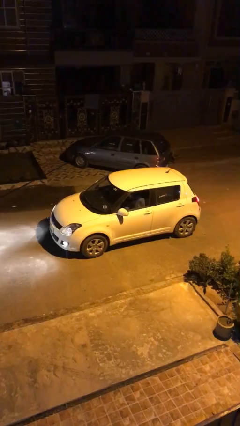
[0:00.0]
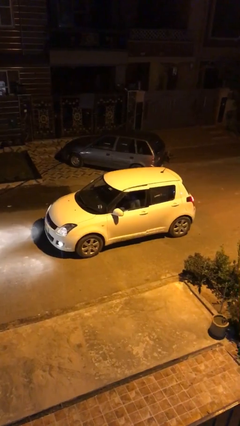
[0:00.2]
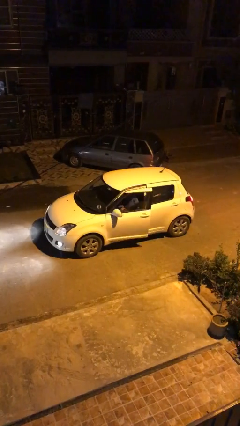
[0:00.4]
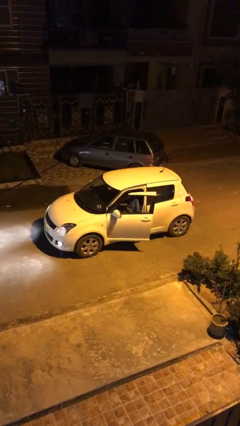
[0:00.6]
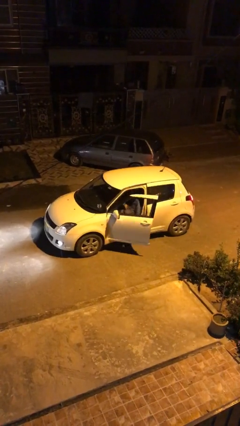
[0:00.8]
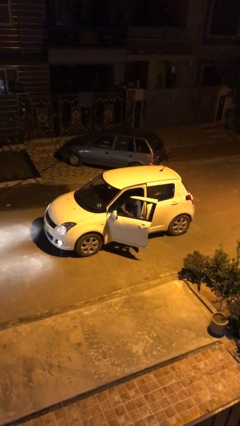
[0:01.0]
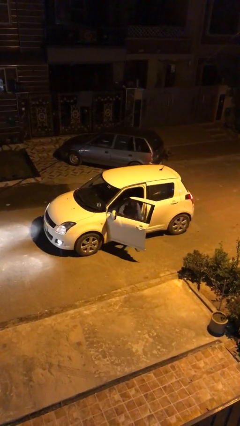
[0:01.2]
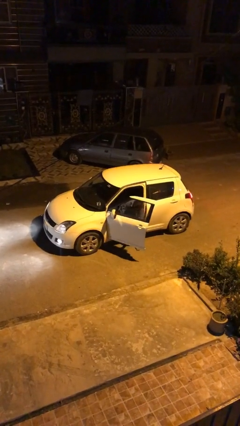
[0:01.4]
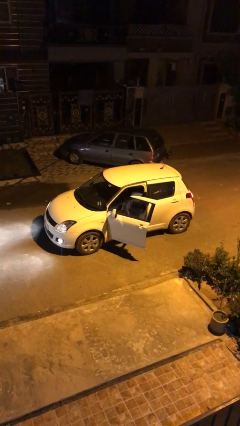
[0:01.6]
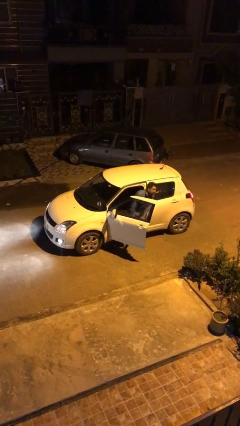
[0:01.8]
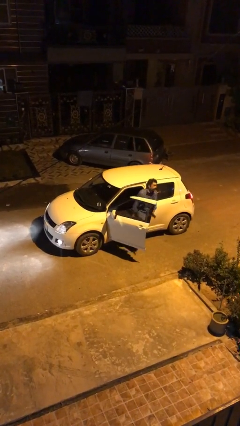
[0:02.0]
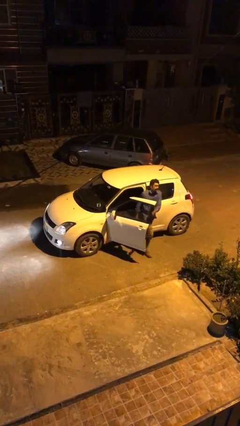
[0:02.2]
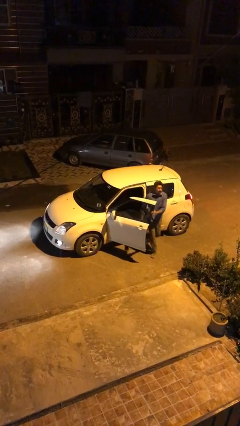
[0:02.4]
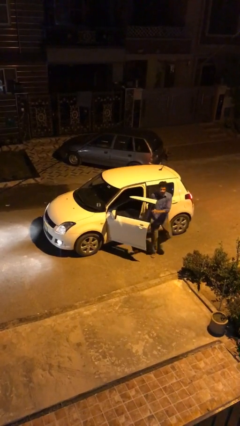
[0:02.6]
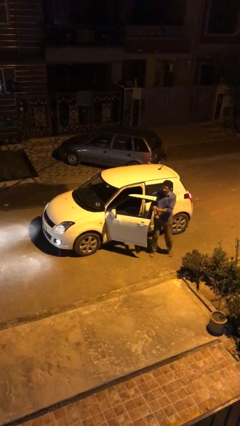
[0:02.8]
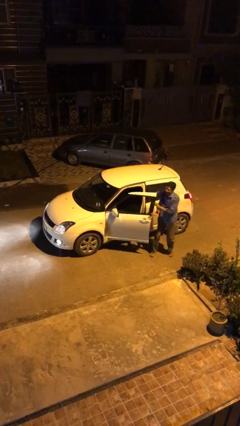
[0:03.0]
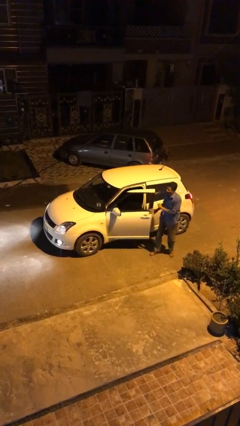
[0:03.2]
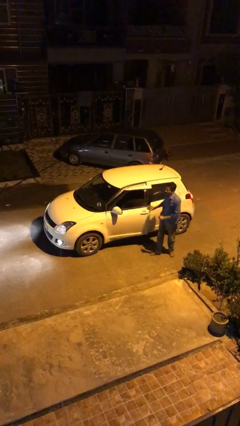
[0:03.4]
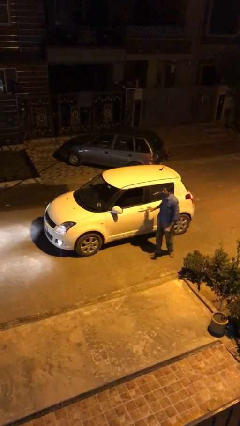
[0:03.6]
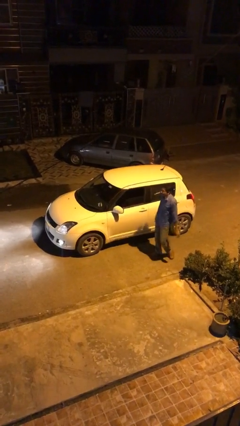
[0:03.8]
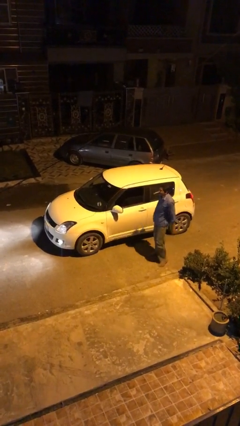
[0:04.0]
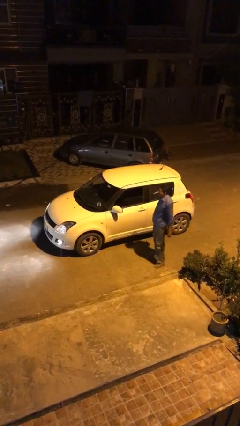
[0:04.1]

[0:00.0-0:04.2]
car drops off person

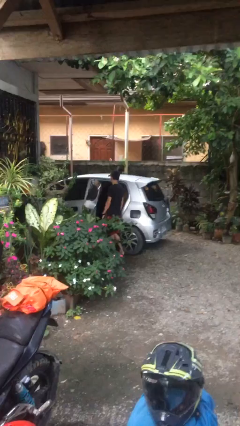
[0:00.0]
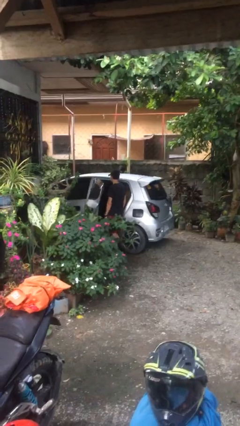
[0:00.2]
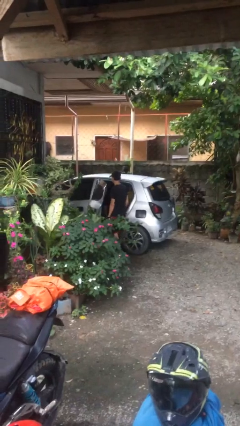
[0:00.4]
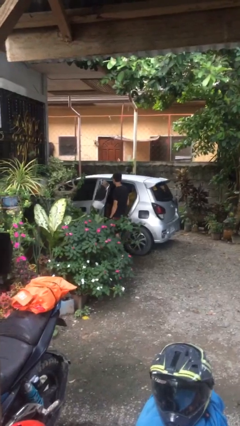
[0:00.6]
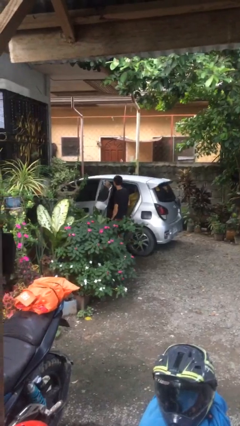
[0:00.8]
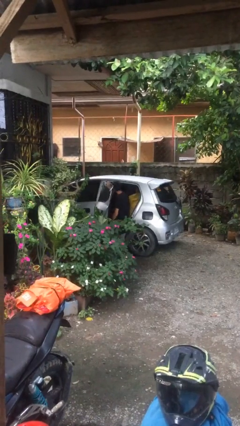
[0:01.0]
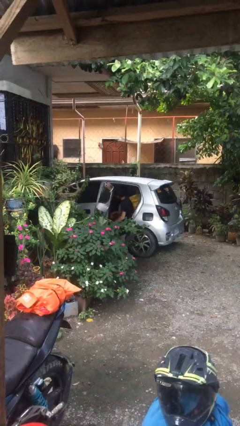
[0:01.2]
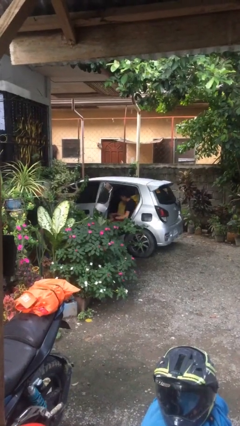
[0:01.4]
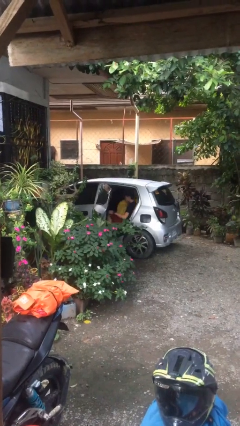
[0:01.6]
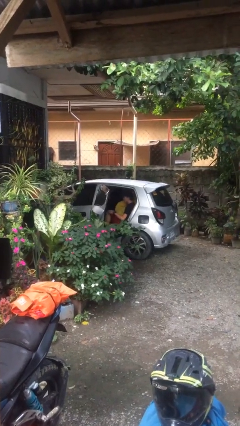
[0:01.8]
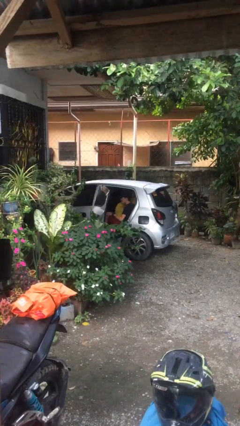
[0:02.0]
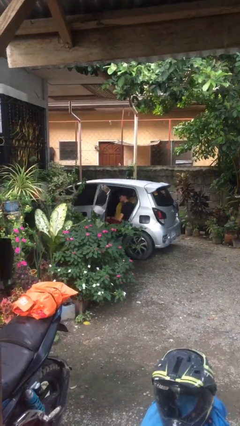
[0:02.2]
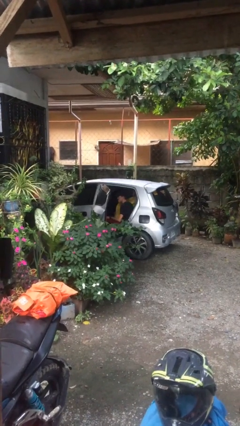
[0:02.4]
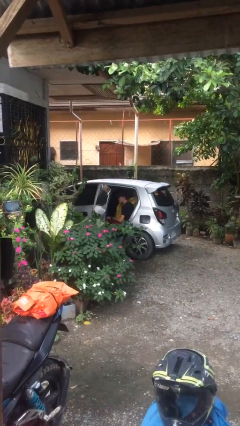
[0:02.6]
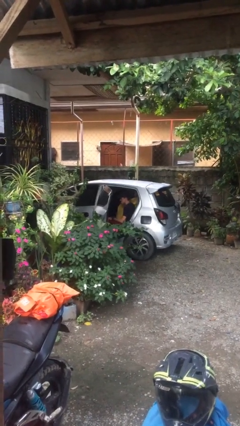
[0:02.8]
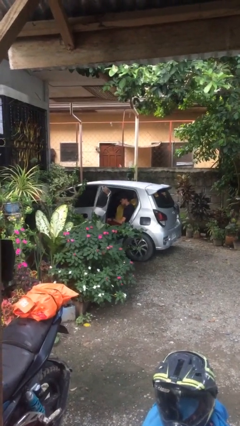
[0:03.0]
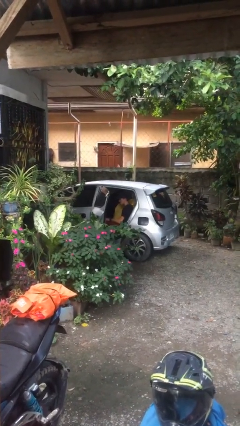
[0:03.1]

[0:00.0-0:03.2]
person enters car

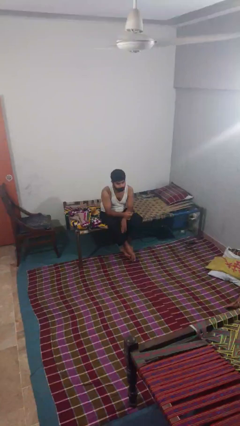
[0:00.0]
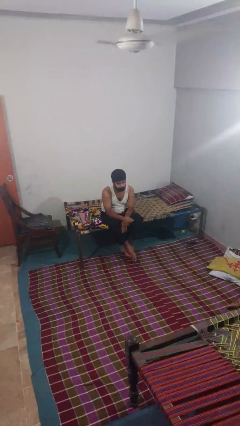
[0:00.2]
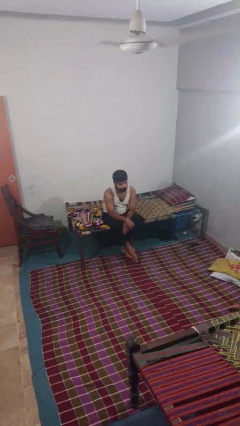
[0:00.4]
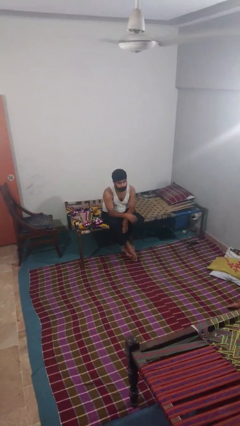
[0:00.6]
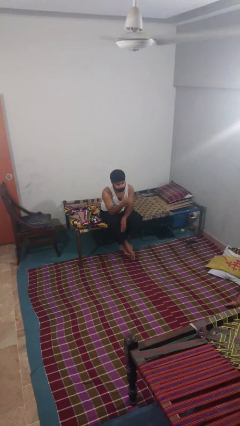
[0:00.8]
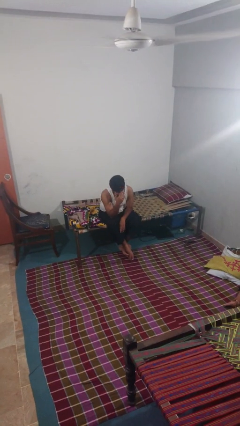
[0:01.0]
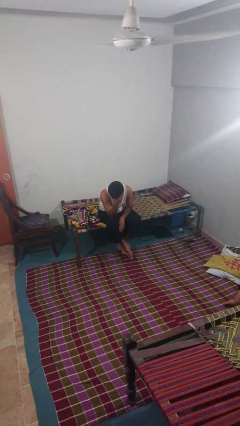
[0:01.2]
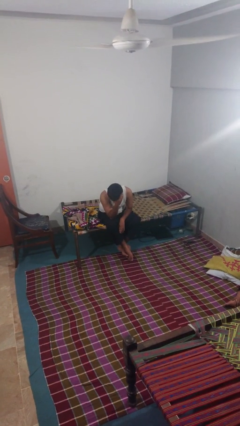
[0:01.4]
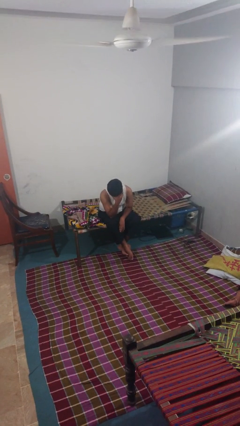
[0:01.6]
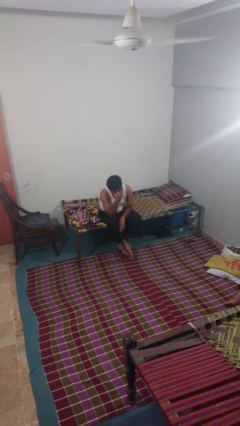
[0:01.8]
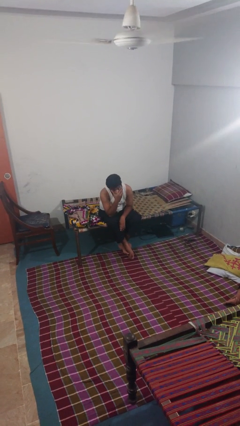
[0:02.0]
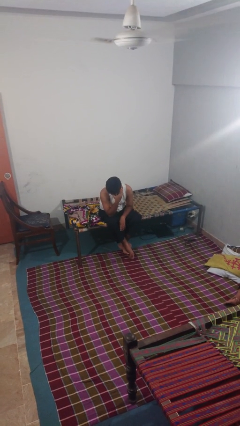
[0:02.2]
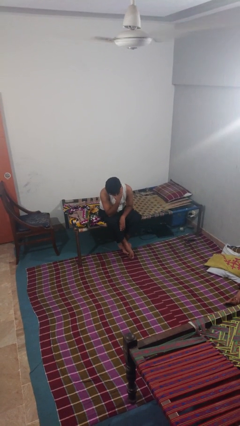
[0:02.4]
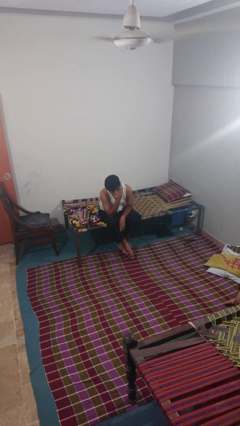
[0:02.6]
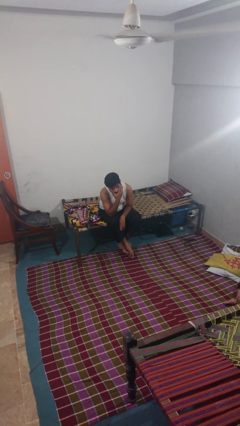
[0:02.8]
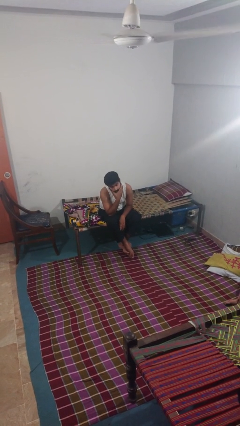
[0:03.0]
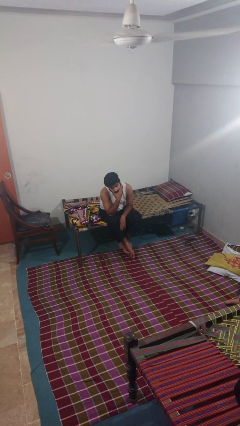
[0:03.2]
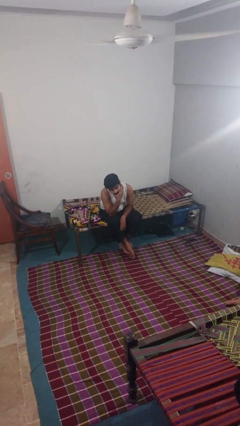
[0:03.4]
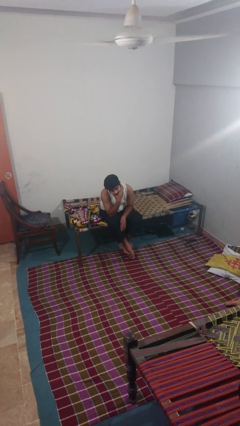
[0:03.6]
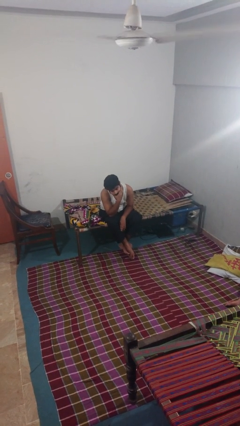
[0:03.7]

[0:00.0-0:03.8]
person covers face with hands

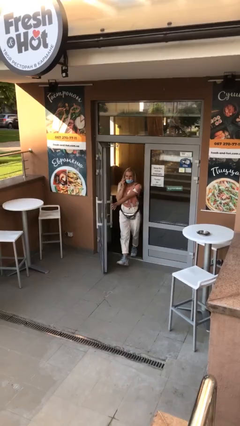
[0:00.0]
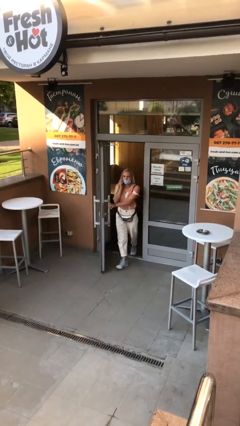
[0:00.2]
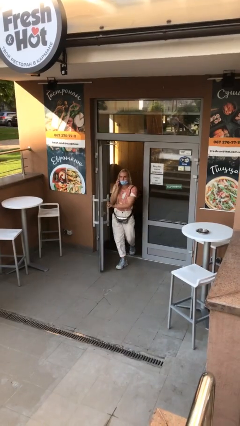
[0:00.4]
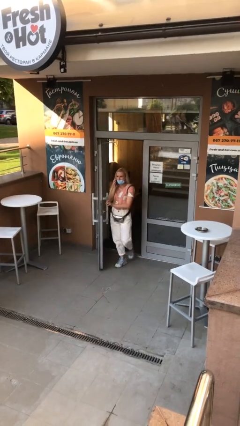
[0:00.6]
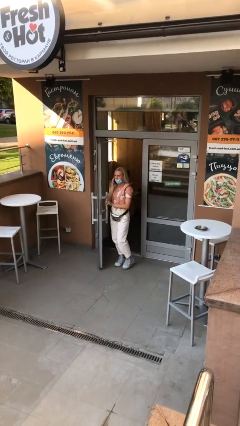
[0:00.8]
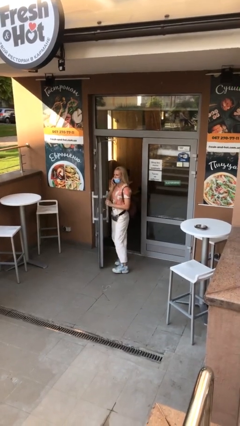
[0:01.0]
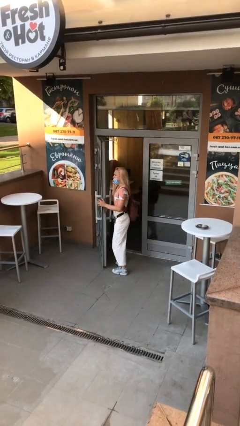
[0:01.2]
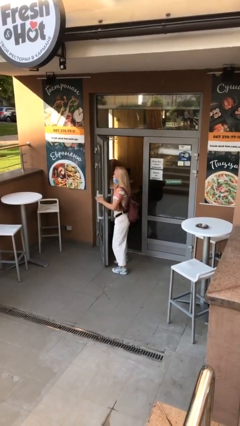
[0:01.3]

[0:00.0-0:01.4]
person enters scene through structure

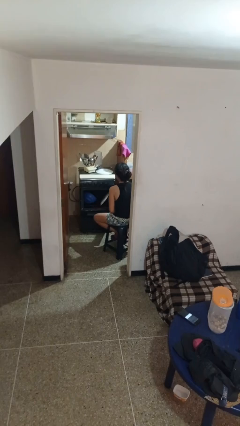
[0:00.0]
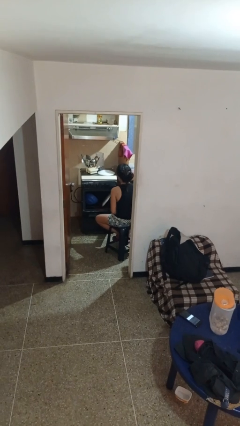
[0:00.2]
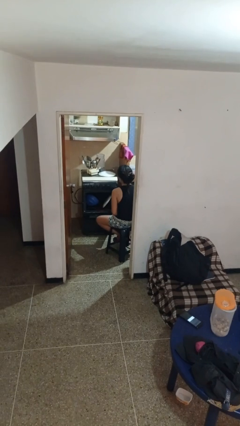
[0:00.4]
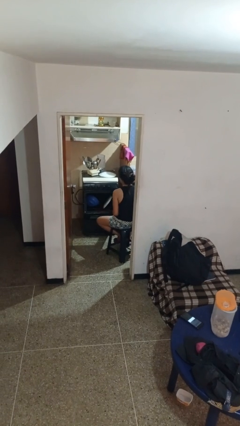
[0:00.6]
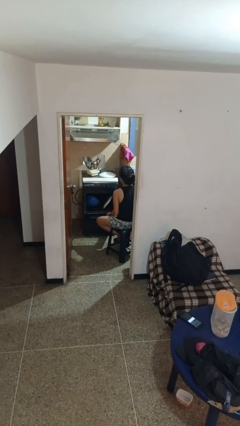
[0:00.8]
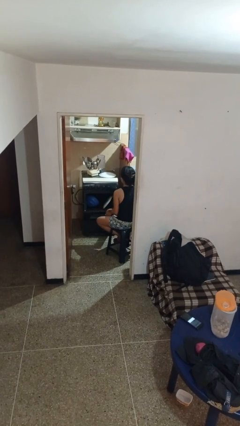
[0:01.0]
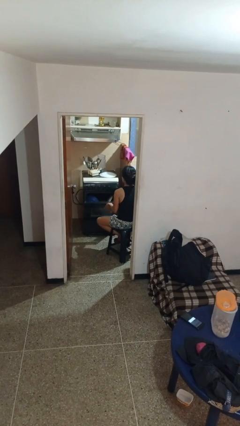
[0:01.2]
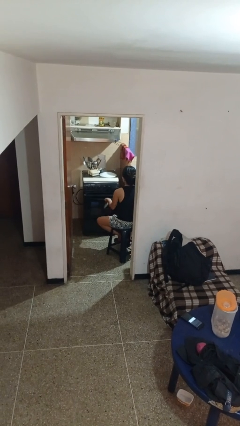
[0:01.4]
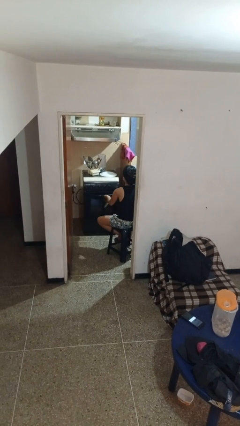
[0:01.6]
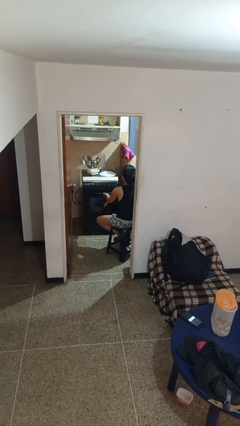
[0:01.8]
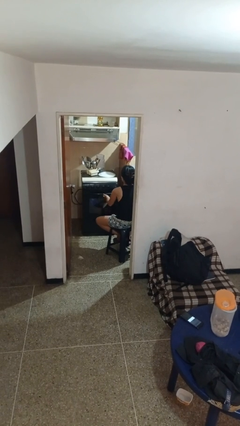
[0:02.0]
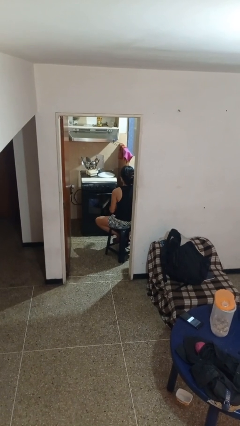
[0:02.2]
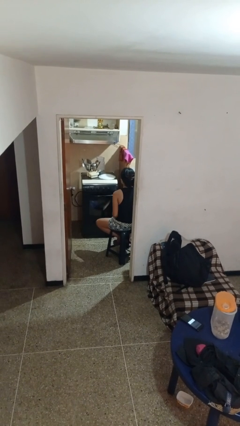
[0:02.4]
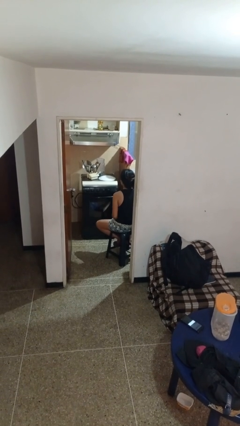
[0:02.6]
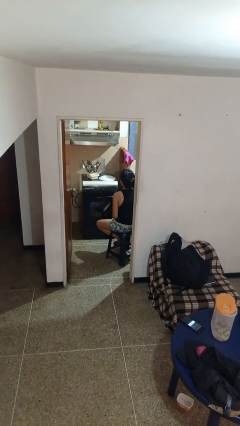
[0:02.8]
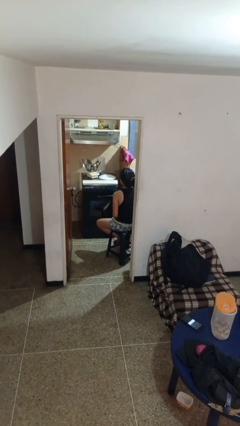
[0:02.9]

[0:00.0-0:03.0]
person closes dishwasher

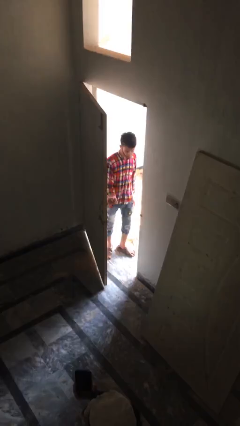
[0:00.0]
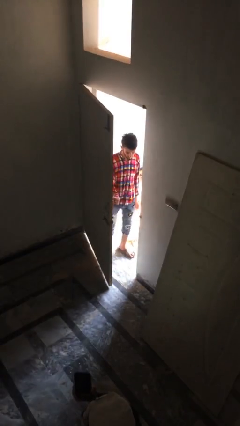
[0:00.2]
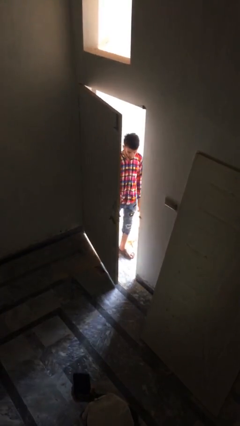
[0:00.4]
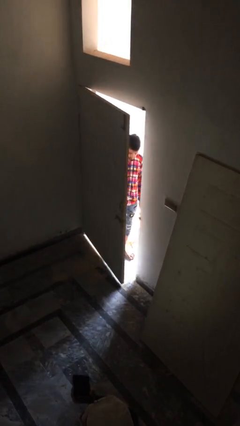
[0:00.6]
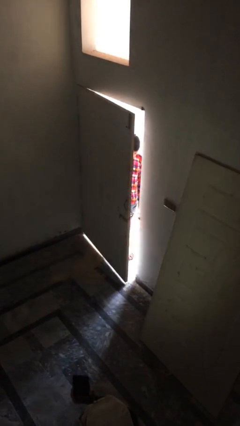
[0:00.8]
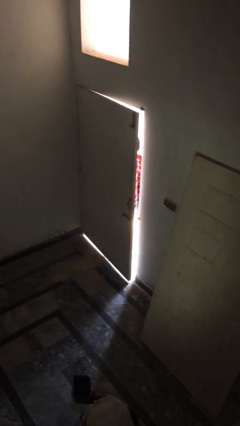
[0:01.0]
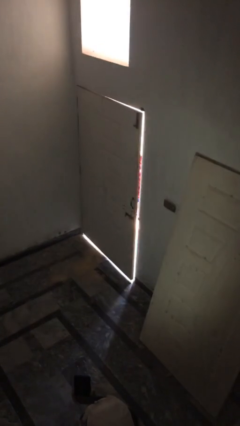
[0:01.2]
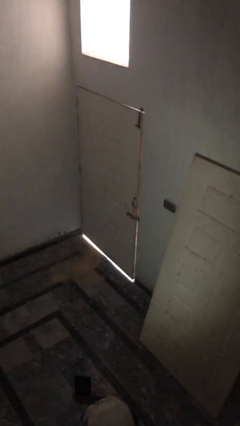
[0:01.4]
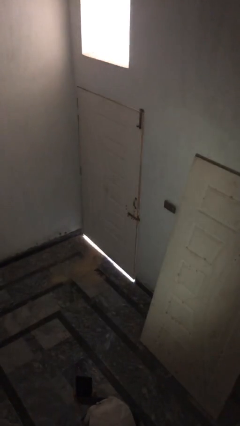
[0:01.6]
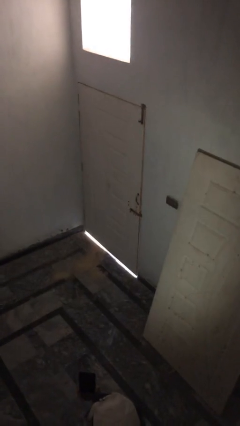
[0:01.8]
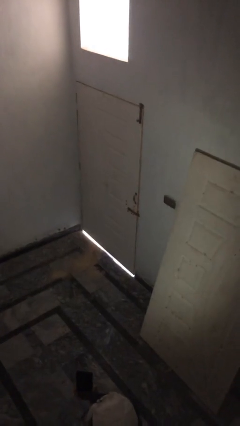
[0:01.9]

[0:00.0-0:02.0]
person closes facility door
